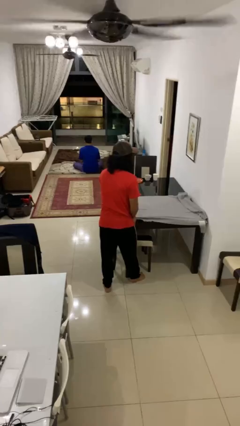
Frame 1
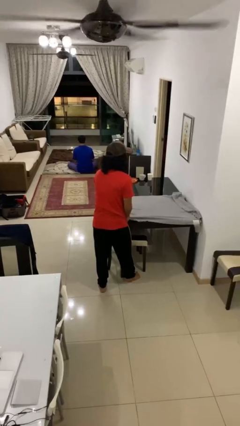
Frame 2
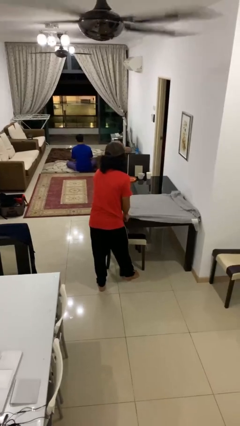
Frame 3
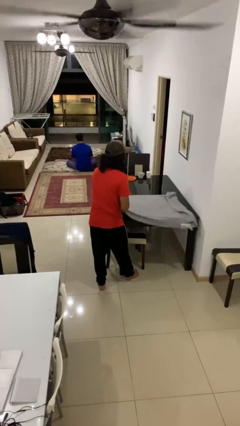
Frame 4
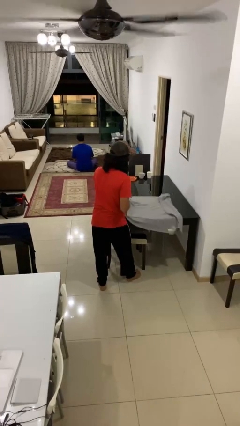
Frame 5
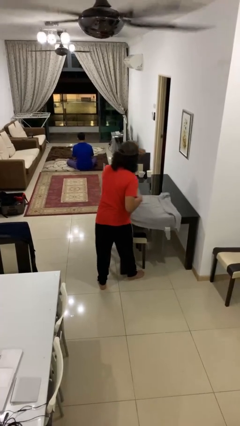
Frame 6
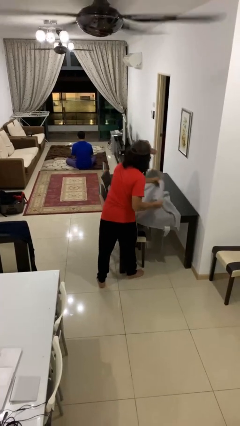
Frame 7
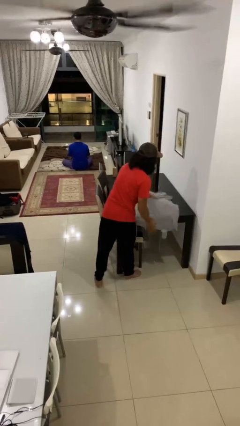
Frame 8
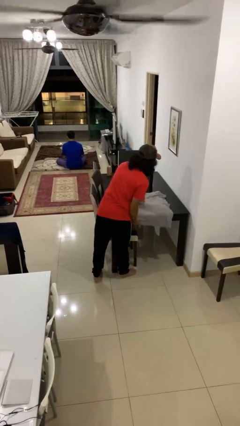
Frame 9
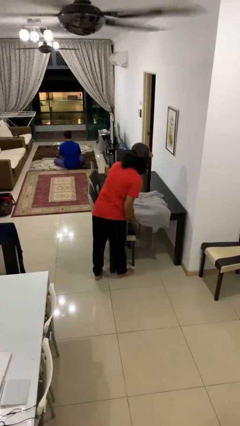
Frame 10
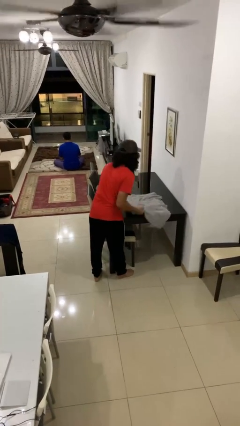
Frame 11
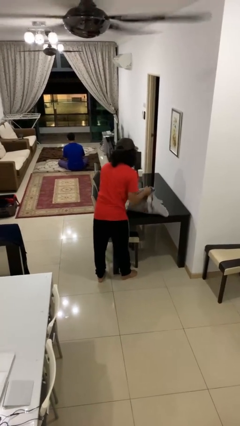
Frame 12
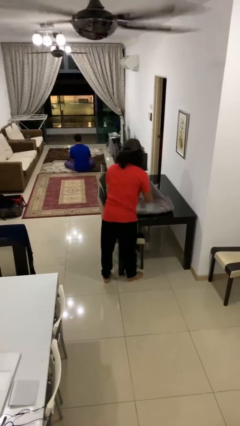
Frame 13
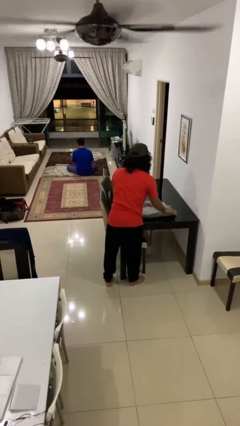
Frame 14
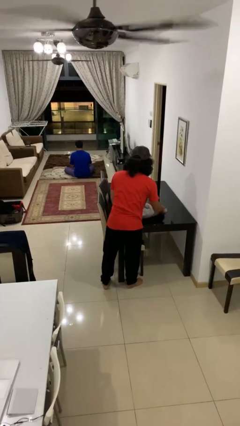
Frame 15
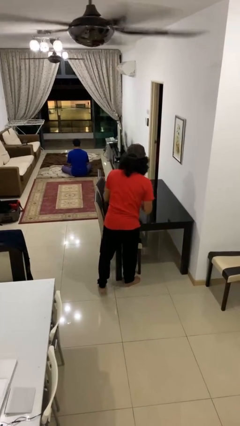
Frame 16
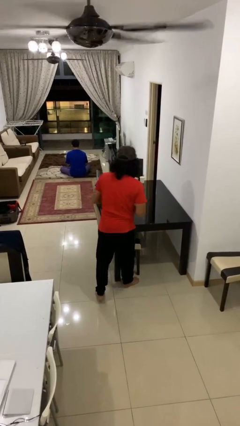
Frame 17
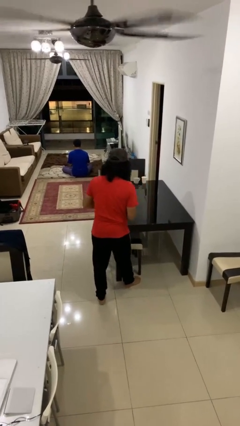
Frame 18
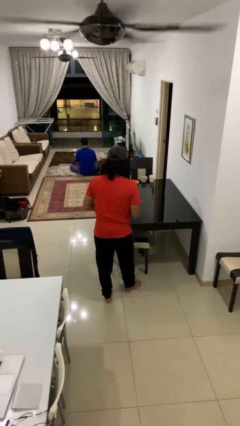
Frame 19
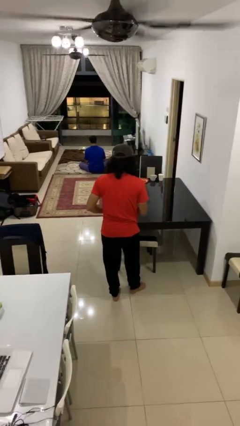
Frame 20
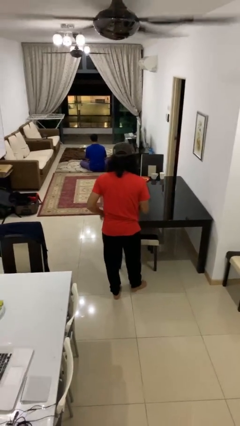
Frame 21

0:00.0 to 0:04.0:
person folds tablecloth

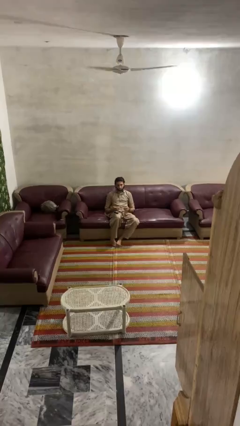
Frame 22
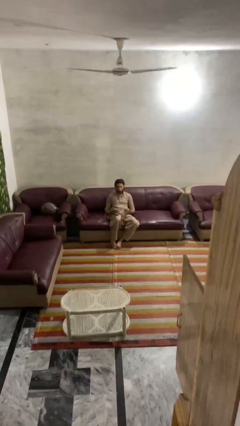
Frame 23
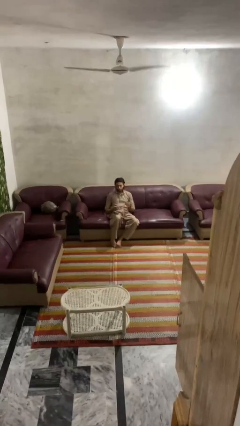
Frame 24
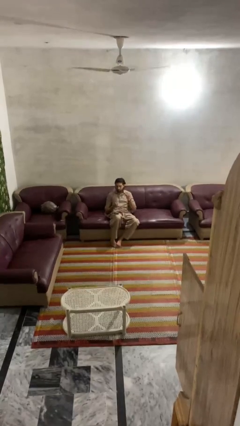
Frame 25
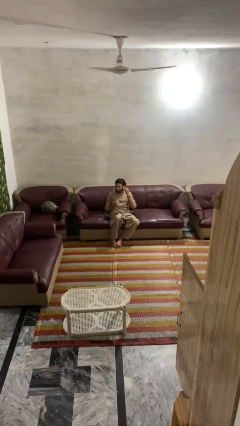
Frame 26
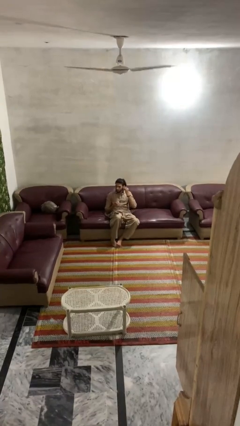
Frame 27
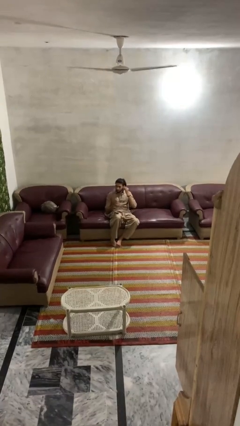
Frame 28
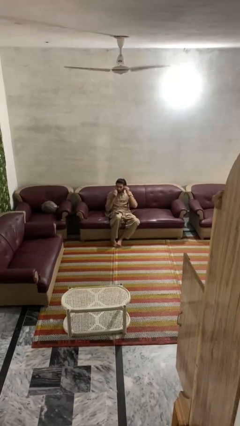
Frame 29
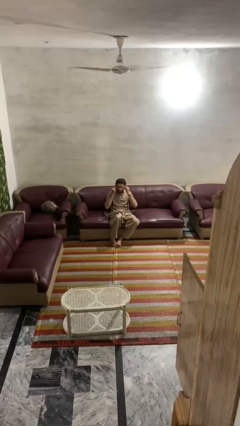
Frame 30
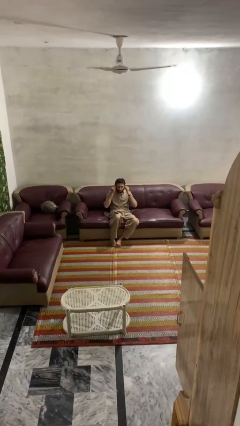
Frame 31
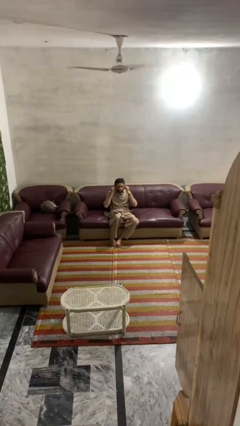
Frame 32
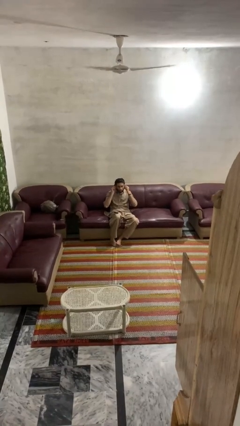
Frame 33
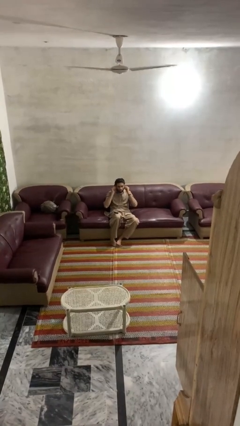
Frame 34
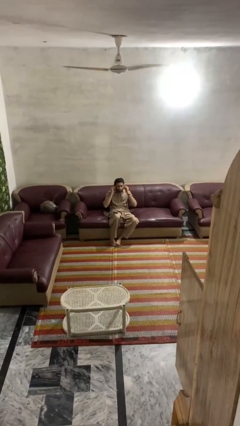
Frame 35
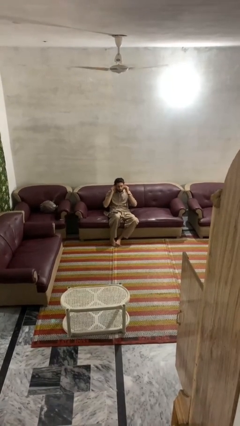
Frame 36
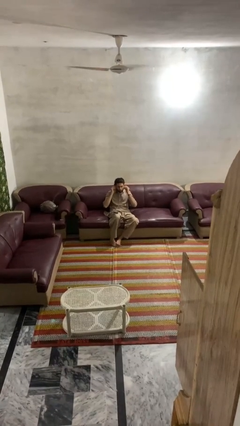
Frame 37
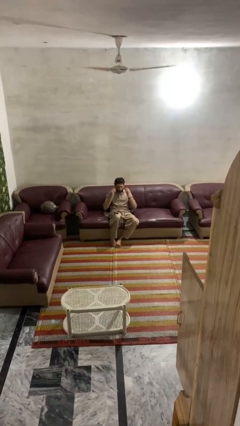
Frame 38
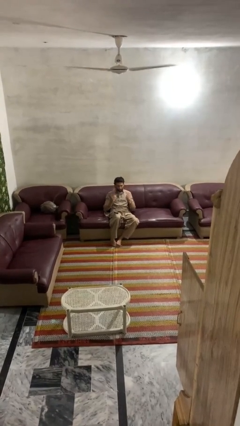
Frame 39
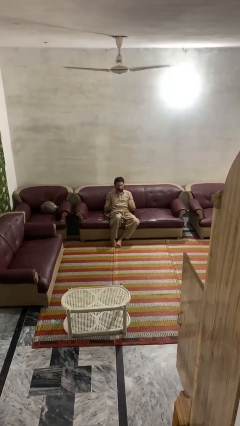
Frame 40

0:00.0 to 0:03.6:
person puts on headphones

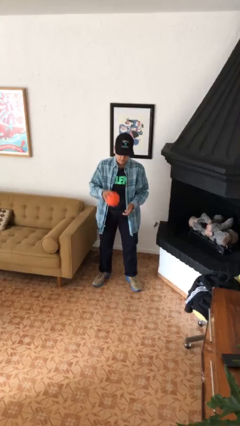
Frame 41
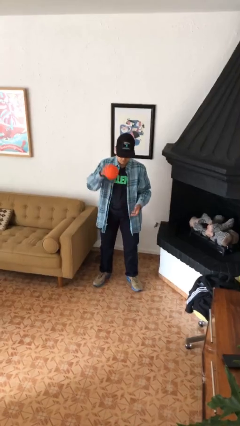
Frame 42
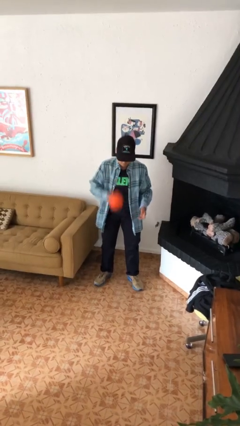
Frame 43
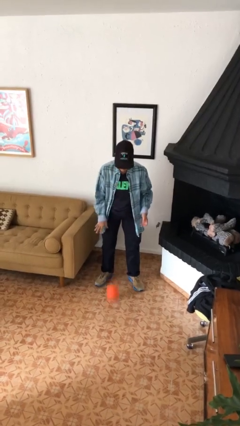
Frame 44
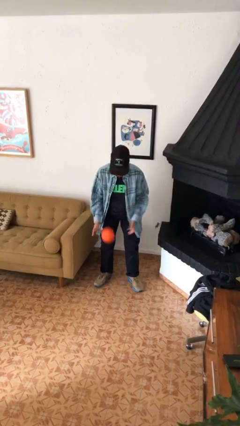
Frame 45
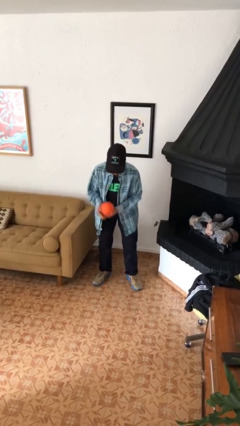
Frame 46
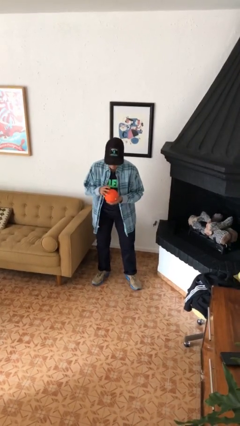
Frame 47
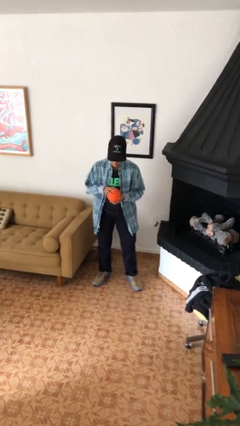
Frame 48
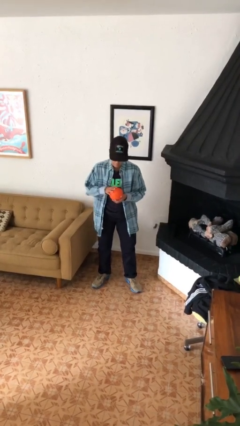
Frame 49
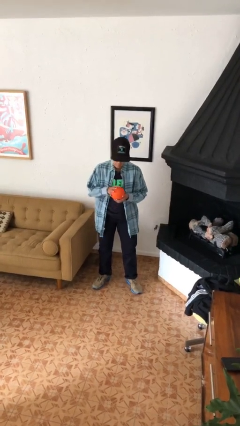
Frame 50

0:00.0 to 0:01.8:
person bounces ball on floor

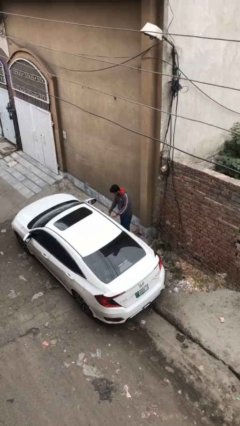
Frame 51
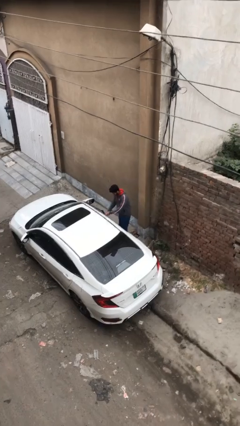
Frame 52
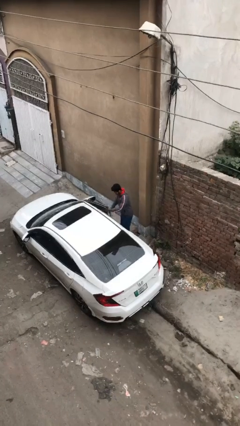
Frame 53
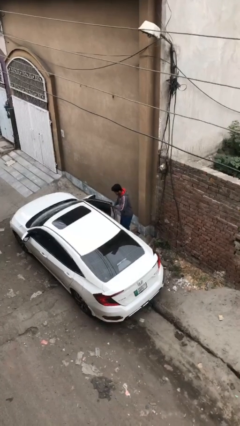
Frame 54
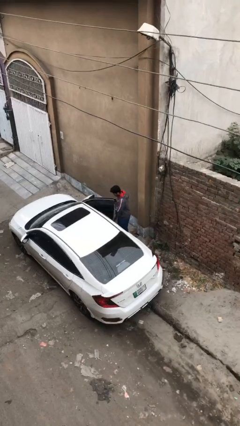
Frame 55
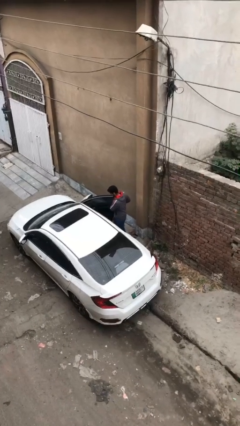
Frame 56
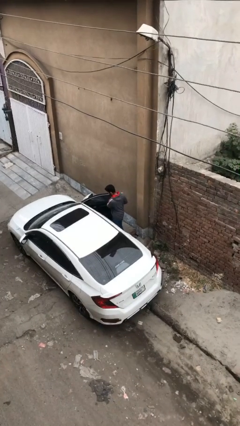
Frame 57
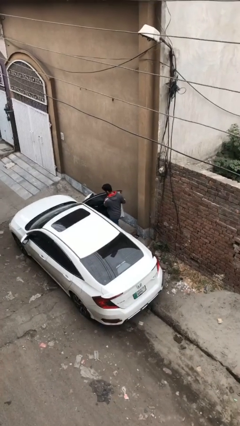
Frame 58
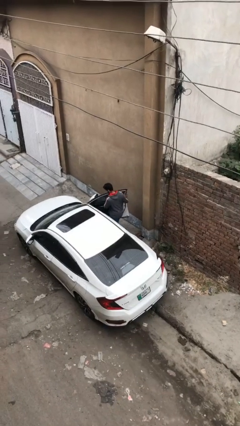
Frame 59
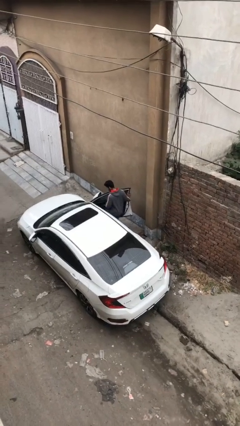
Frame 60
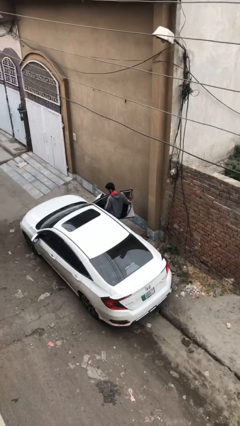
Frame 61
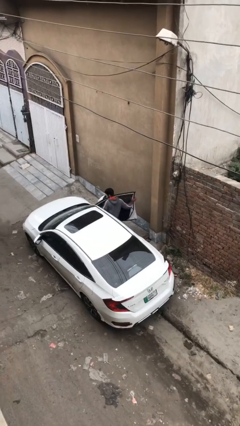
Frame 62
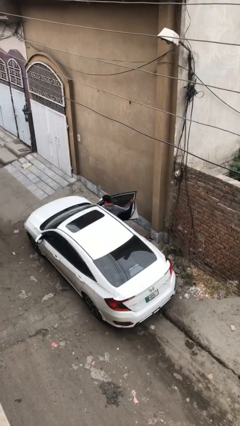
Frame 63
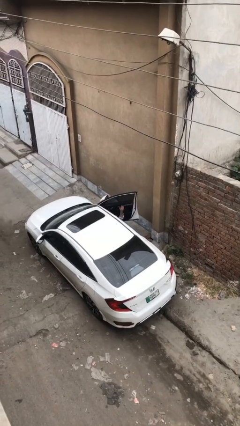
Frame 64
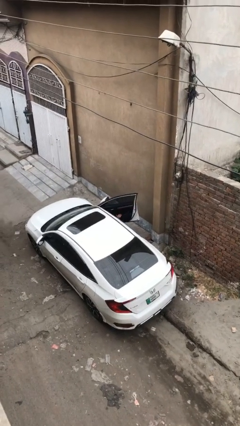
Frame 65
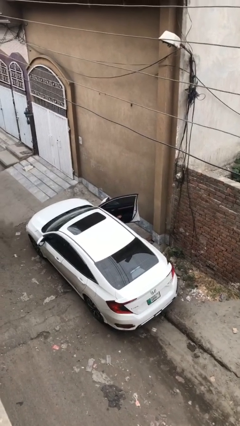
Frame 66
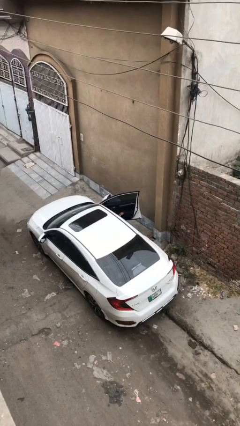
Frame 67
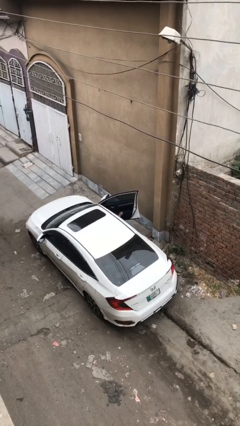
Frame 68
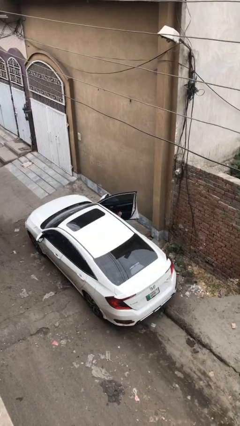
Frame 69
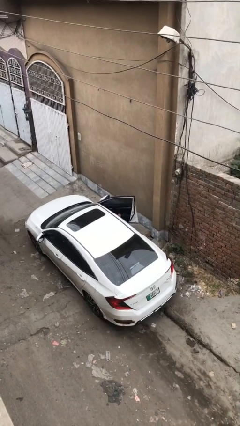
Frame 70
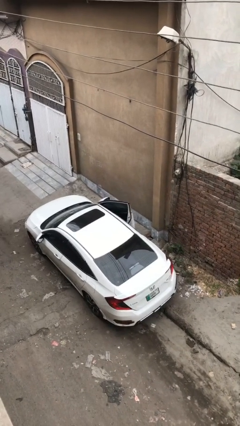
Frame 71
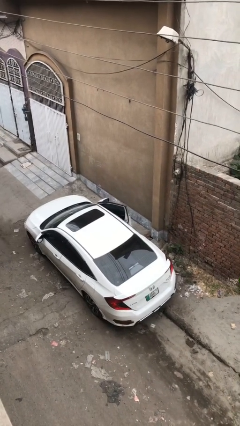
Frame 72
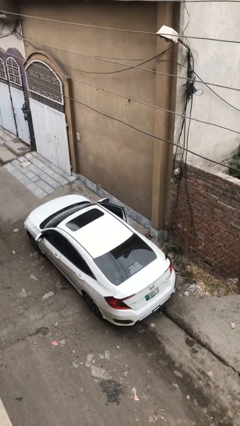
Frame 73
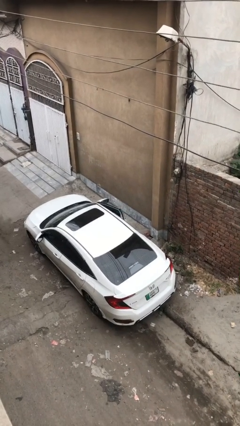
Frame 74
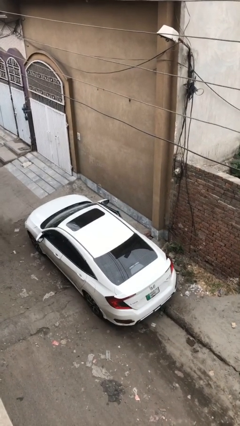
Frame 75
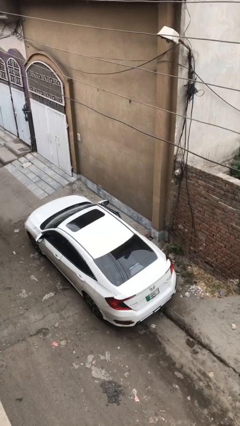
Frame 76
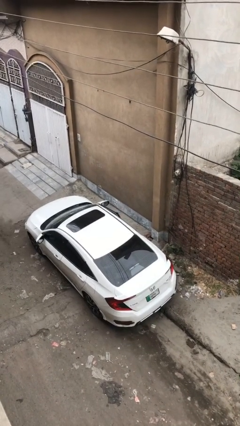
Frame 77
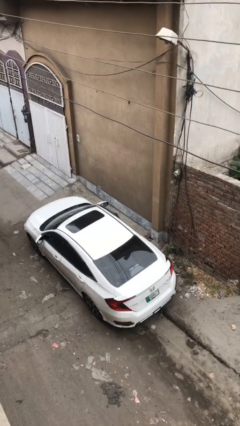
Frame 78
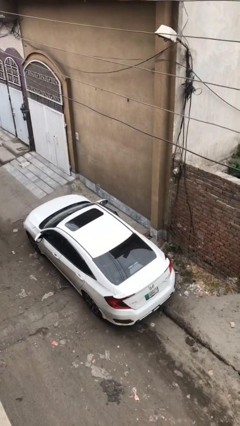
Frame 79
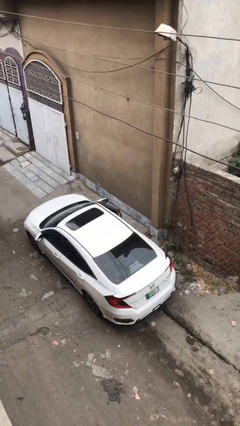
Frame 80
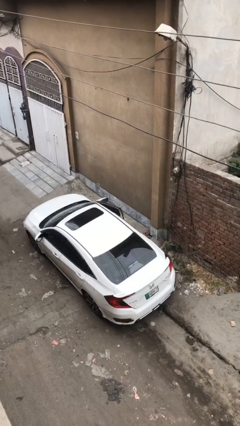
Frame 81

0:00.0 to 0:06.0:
car picks up person

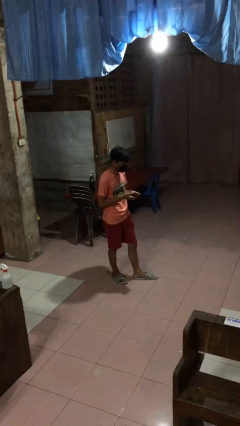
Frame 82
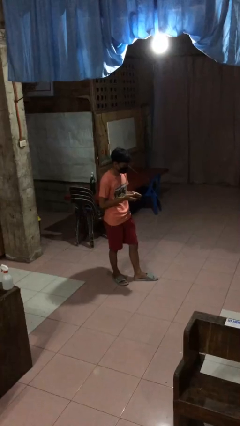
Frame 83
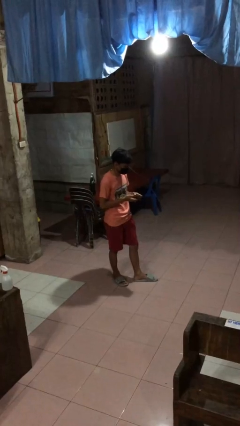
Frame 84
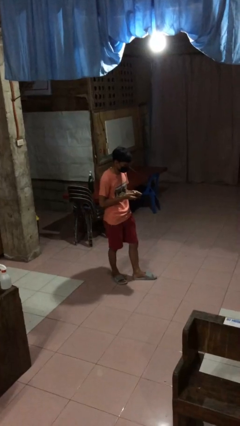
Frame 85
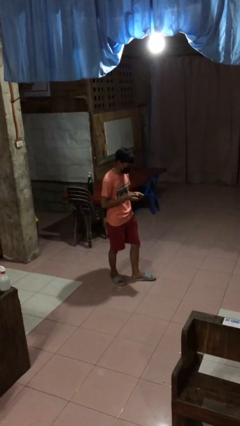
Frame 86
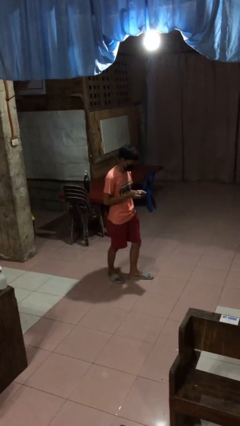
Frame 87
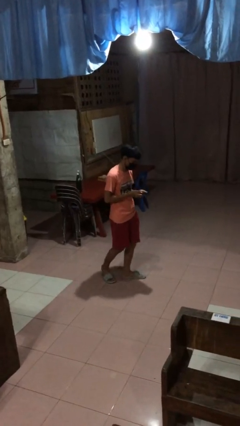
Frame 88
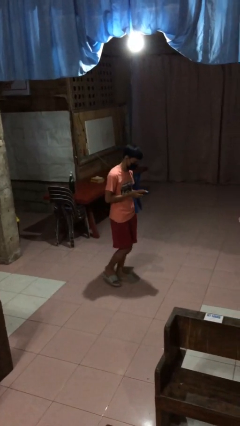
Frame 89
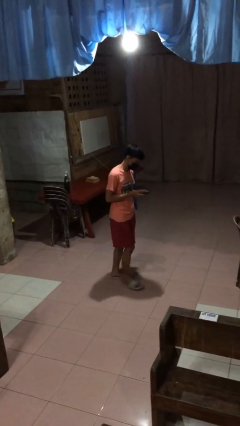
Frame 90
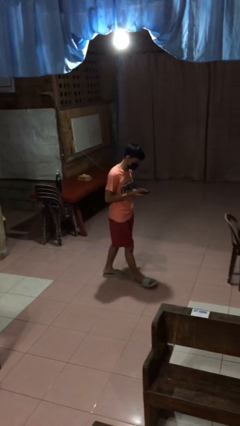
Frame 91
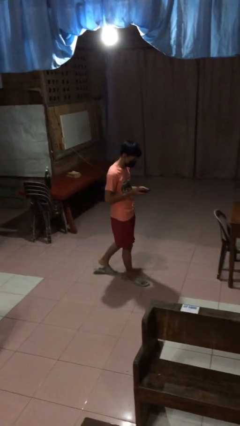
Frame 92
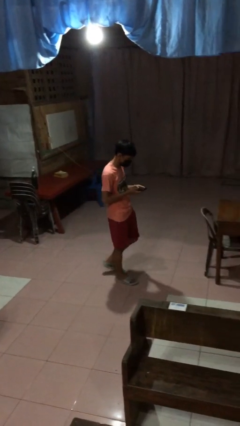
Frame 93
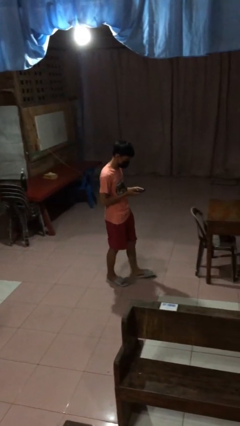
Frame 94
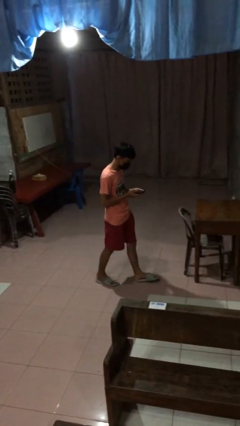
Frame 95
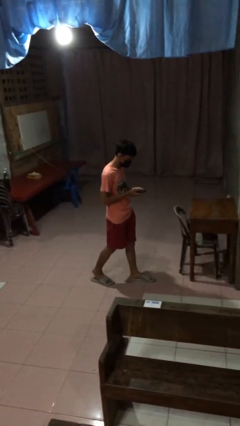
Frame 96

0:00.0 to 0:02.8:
person texts on phone
